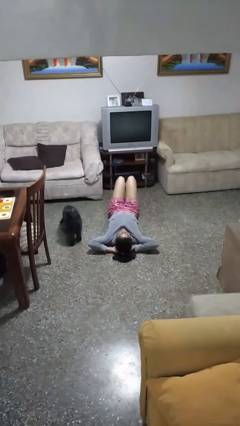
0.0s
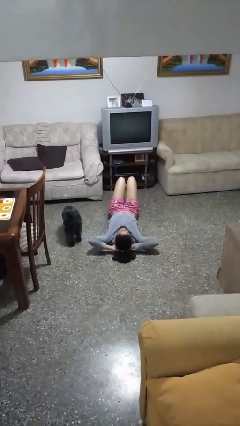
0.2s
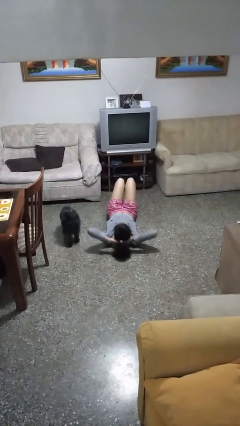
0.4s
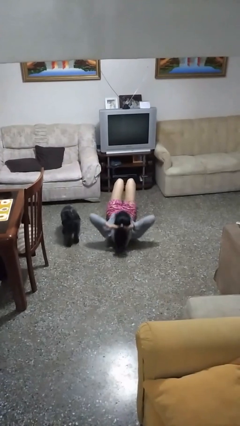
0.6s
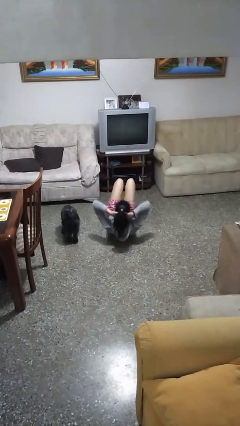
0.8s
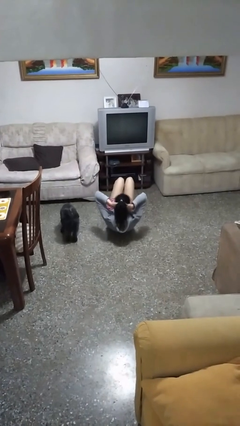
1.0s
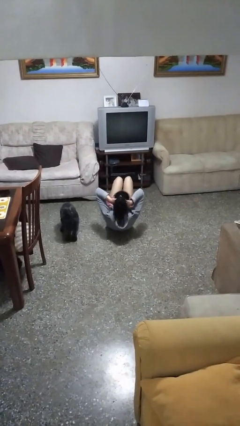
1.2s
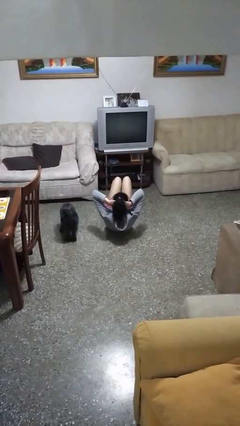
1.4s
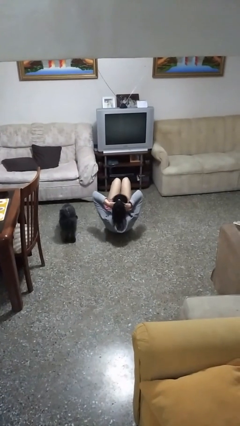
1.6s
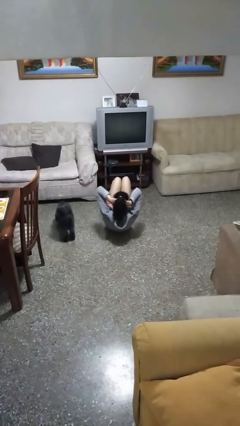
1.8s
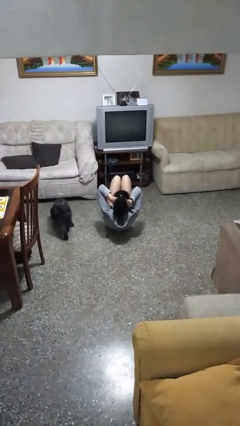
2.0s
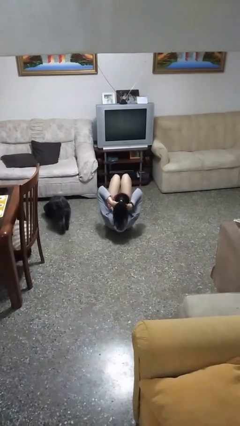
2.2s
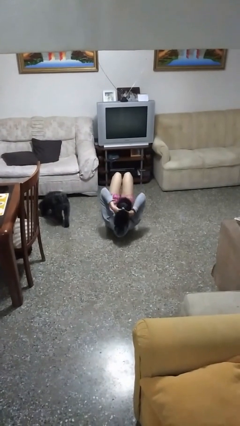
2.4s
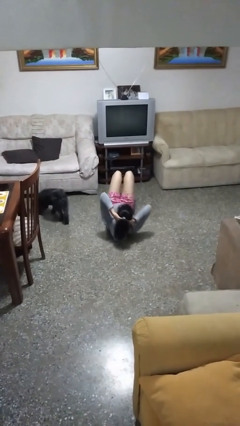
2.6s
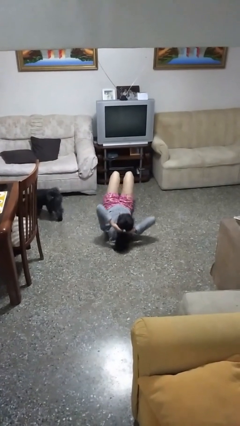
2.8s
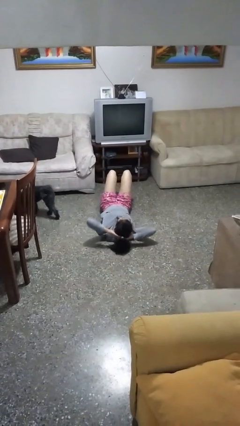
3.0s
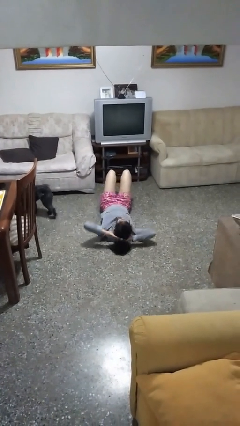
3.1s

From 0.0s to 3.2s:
person exercises with situp

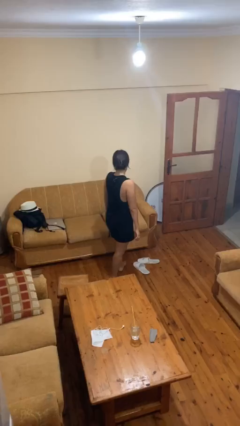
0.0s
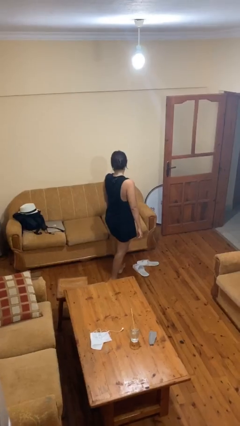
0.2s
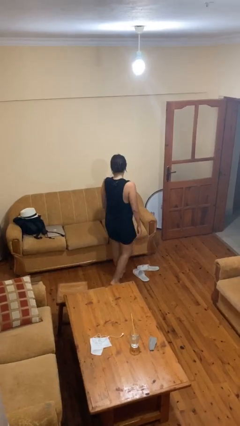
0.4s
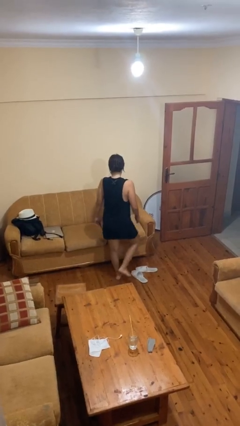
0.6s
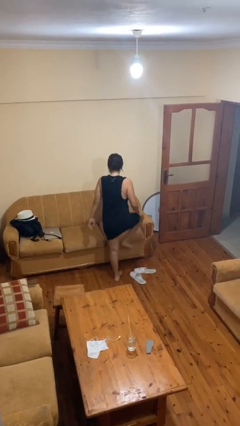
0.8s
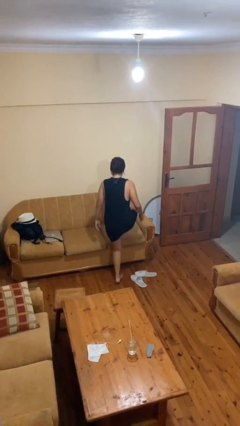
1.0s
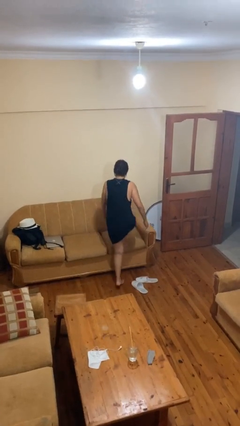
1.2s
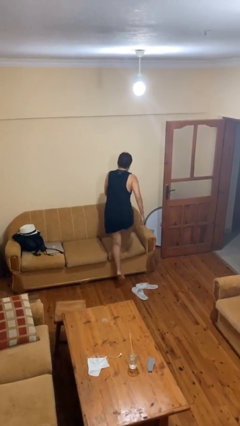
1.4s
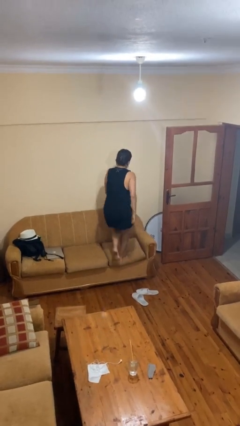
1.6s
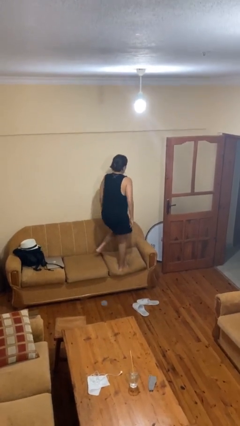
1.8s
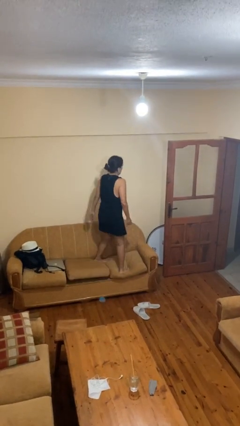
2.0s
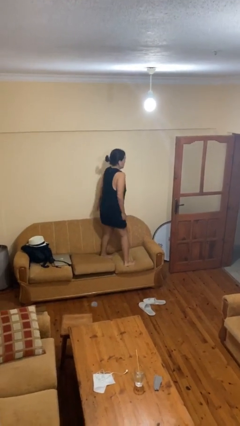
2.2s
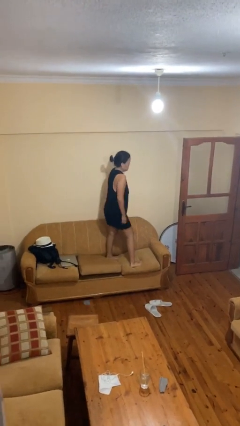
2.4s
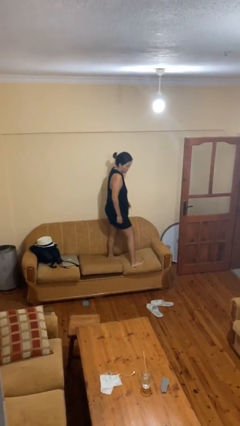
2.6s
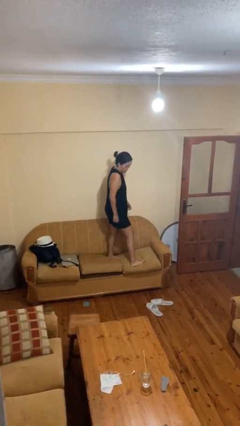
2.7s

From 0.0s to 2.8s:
person climbs on couch

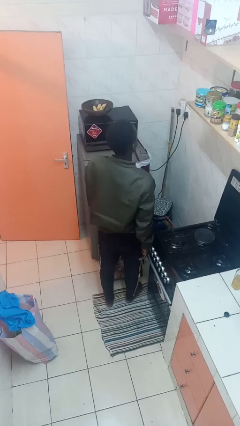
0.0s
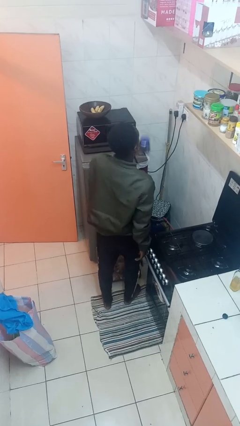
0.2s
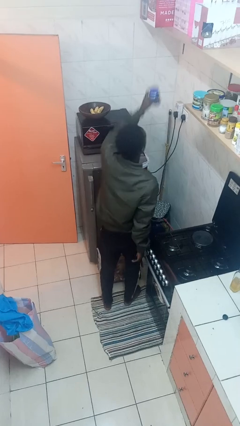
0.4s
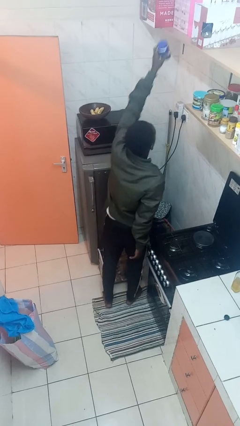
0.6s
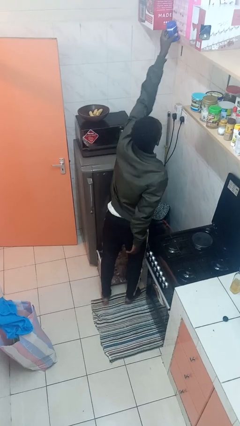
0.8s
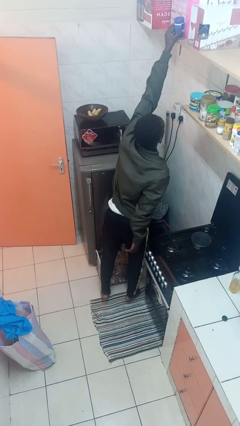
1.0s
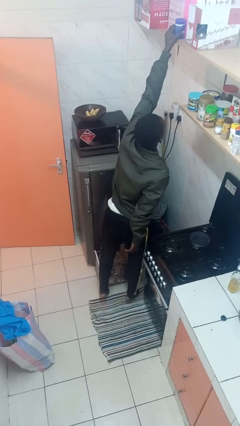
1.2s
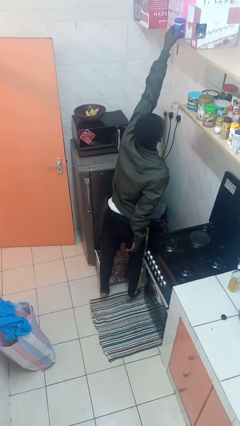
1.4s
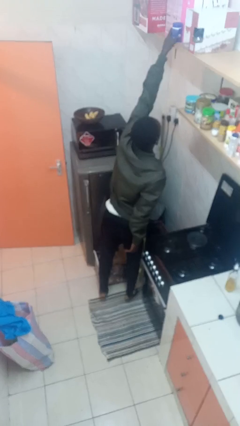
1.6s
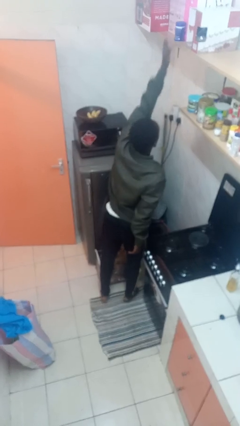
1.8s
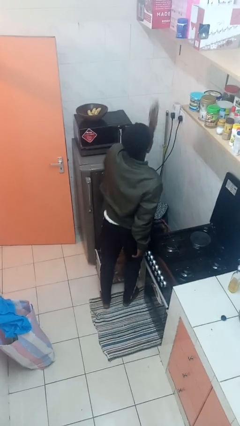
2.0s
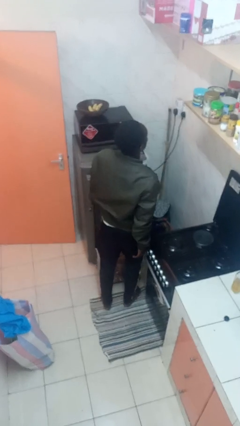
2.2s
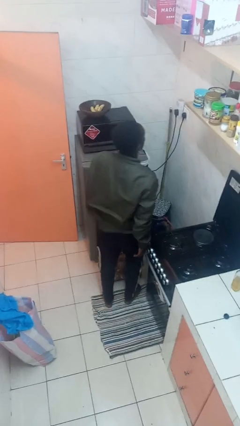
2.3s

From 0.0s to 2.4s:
person puts down object on shelf

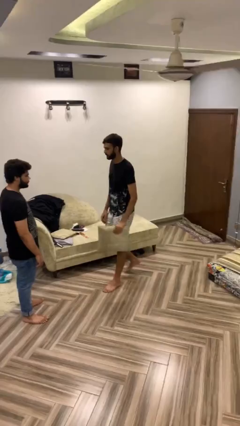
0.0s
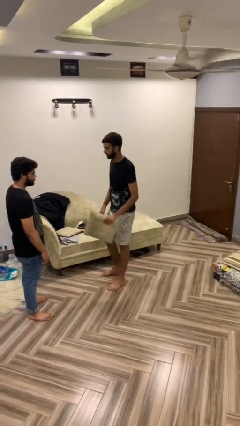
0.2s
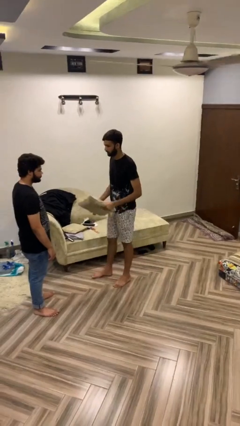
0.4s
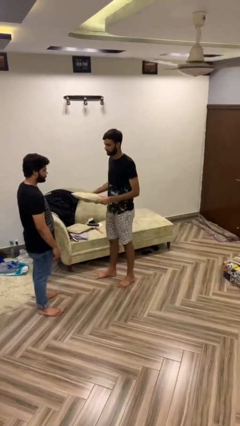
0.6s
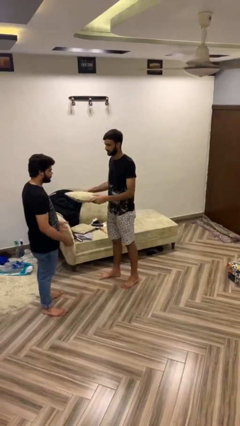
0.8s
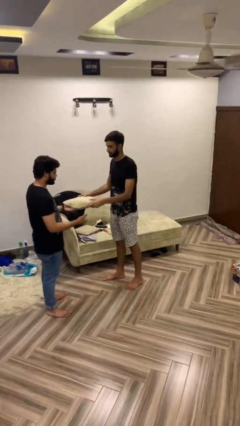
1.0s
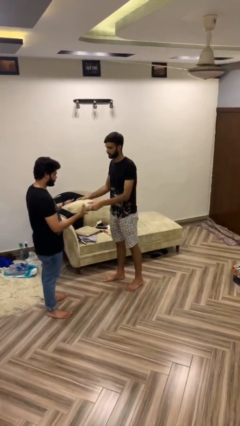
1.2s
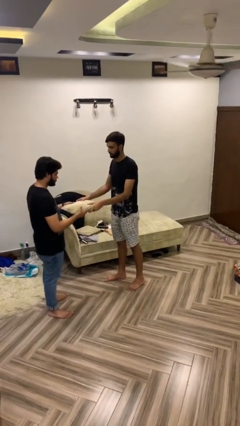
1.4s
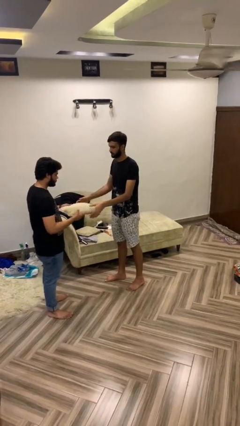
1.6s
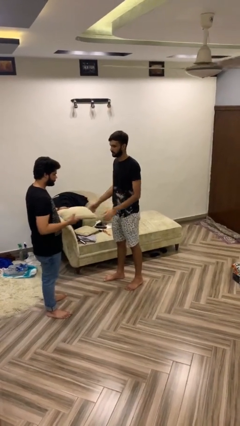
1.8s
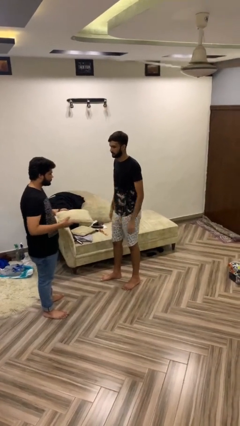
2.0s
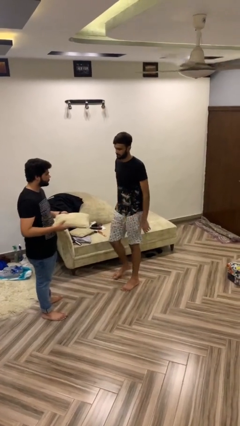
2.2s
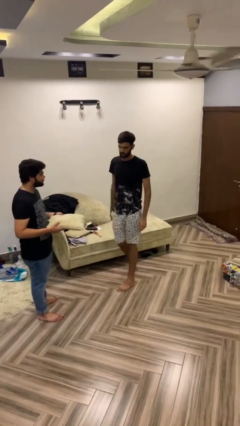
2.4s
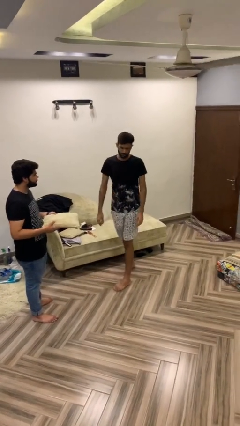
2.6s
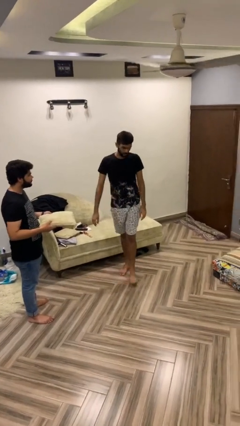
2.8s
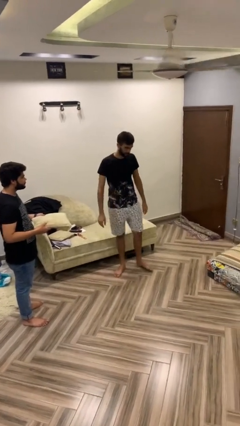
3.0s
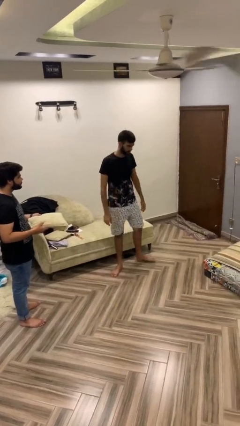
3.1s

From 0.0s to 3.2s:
person transfers object to person

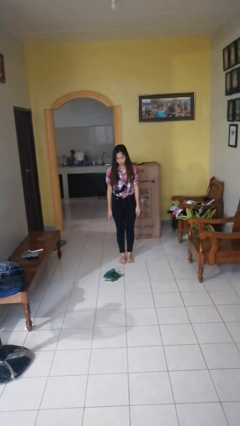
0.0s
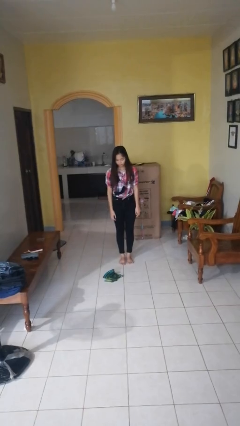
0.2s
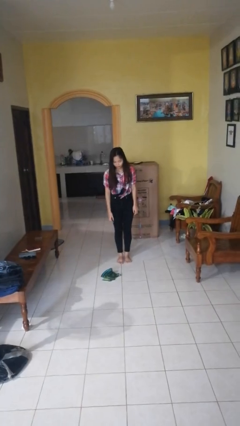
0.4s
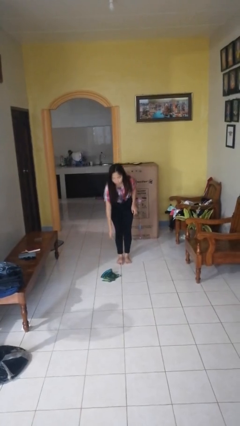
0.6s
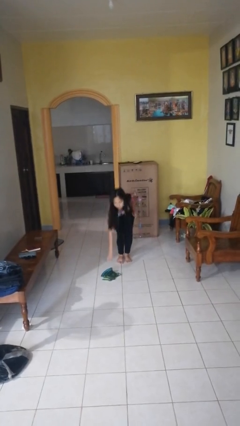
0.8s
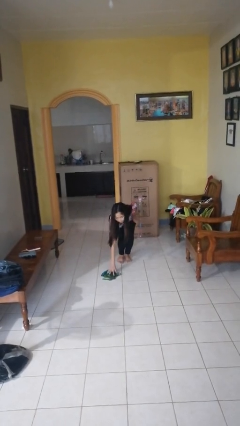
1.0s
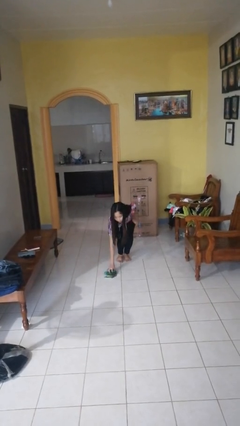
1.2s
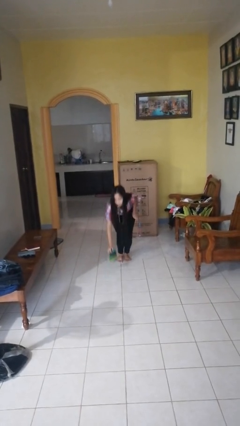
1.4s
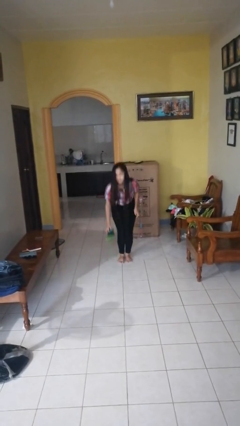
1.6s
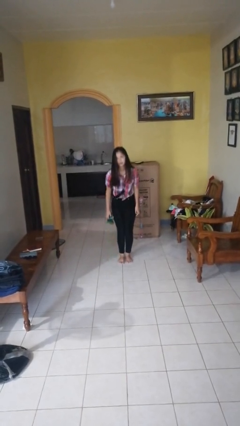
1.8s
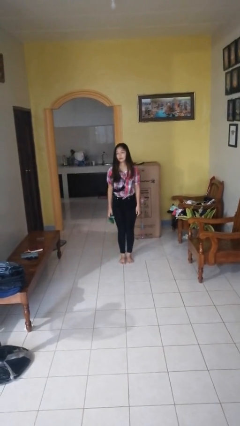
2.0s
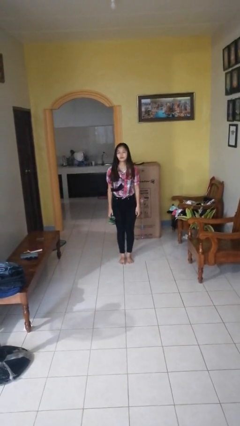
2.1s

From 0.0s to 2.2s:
person picks up object from floor

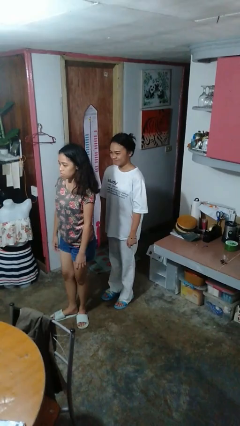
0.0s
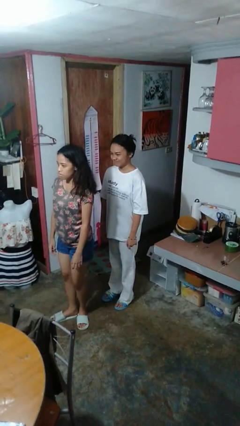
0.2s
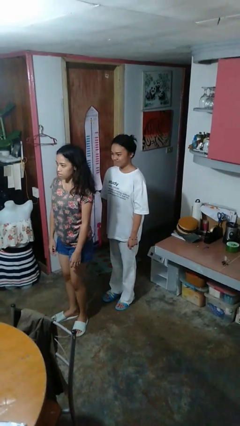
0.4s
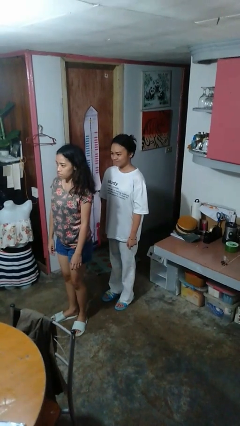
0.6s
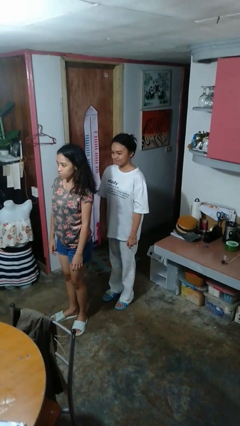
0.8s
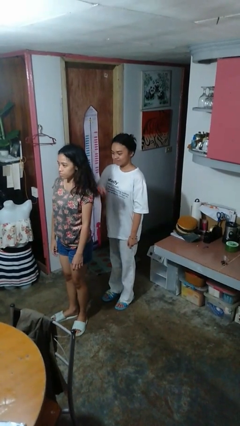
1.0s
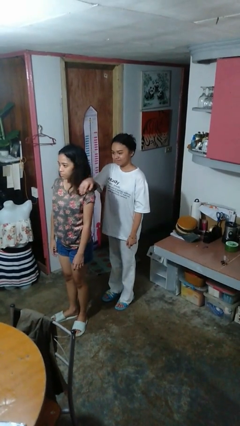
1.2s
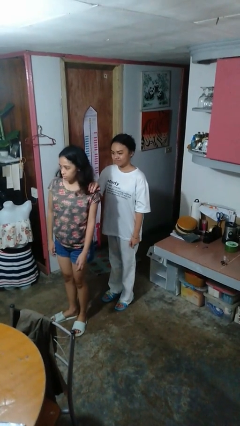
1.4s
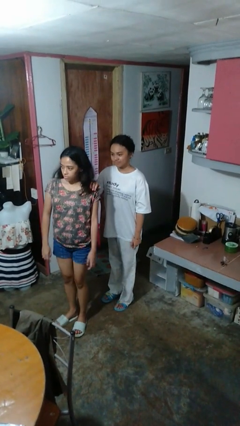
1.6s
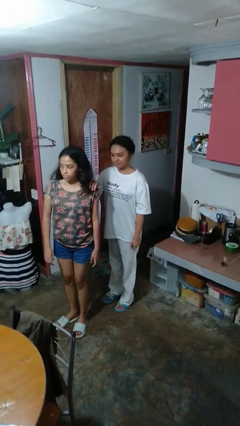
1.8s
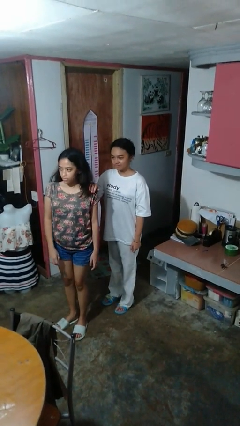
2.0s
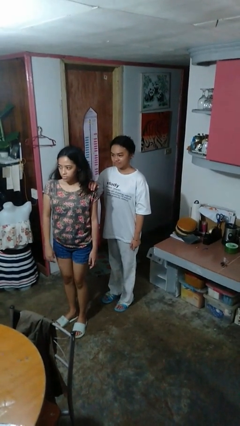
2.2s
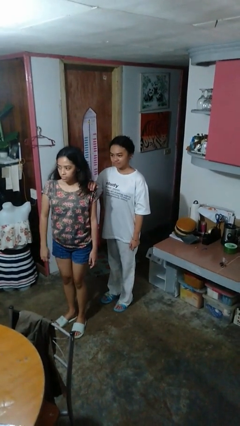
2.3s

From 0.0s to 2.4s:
person grabs person by shoulder

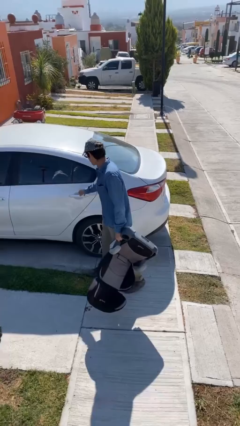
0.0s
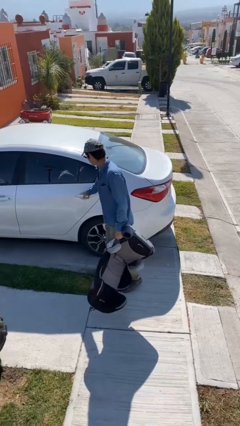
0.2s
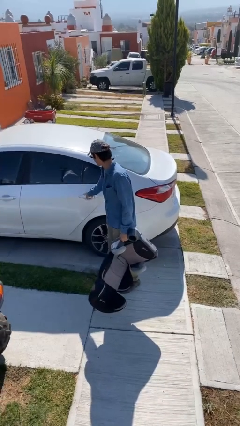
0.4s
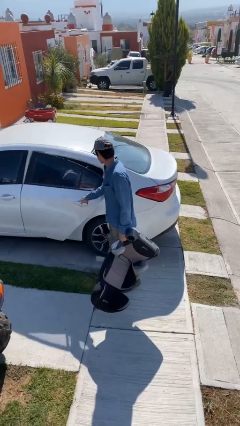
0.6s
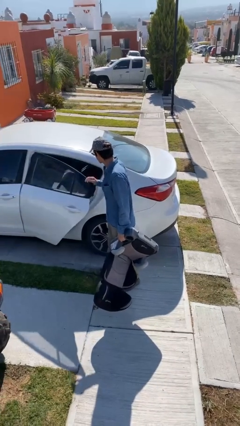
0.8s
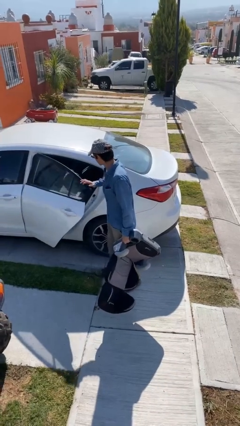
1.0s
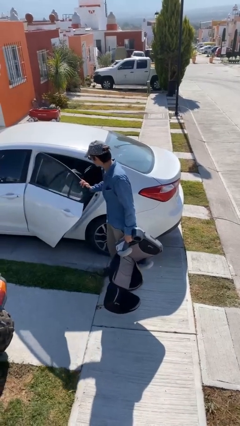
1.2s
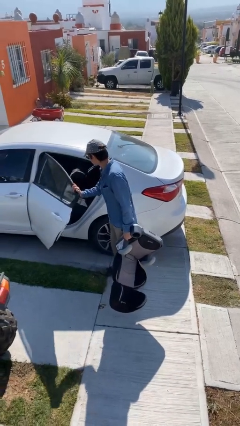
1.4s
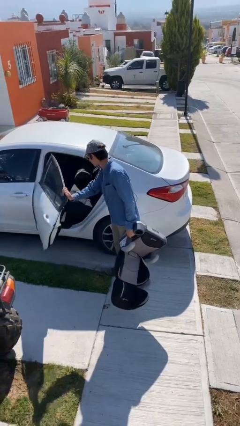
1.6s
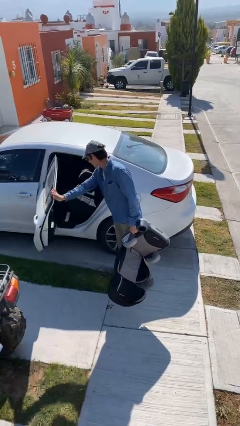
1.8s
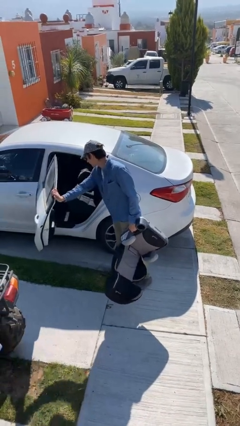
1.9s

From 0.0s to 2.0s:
person opens car door
